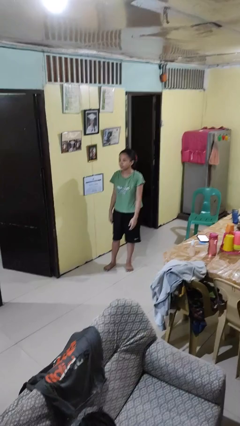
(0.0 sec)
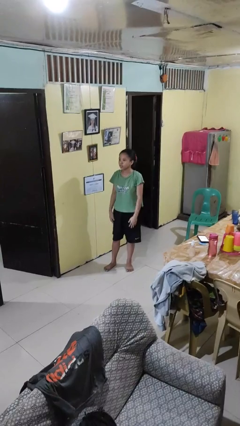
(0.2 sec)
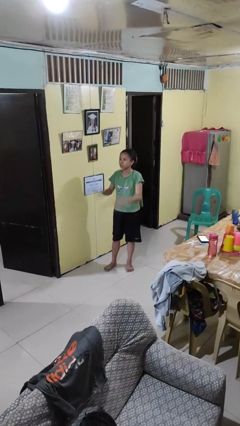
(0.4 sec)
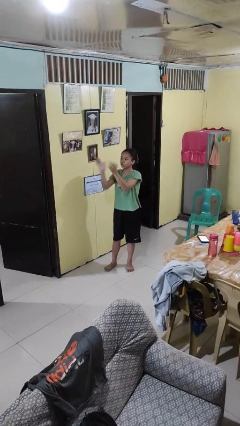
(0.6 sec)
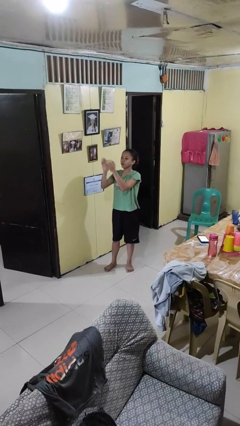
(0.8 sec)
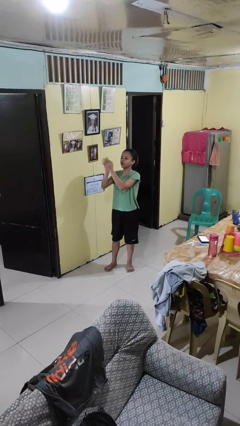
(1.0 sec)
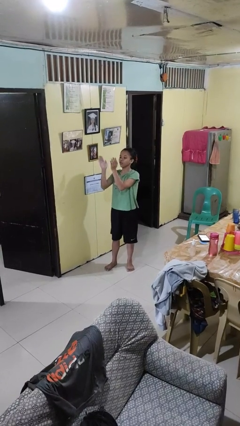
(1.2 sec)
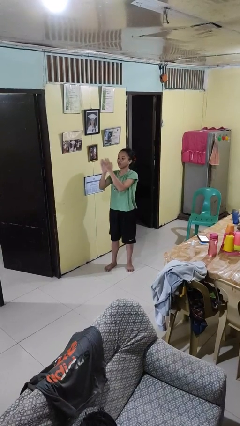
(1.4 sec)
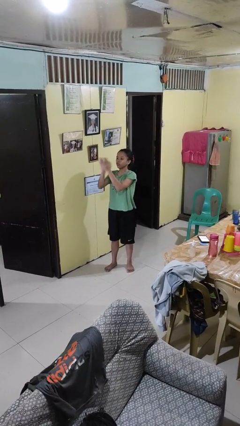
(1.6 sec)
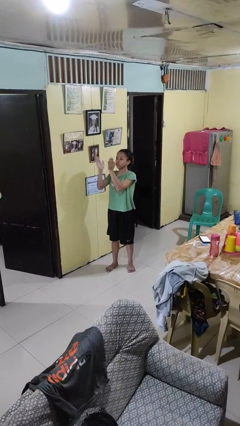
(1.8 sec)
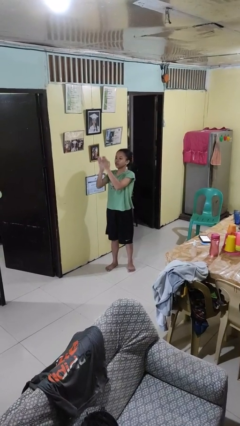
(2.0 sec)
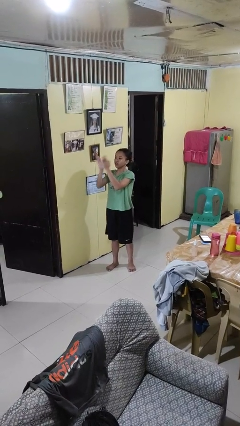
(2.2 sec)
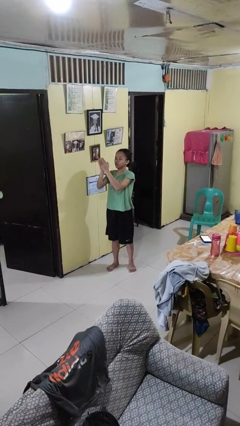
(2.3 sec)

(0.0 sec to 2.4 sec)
person claps hands

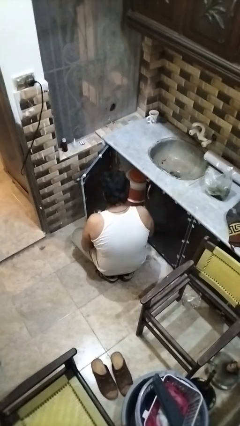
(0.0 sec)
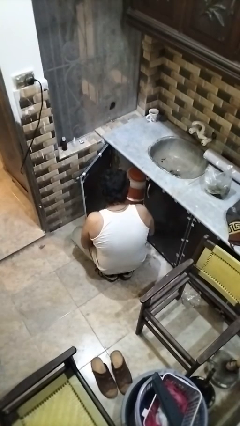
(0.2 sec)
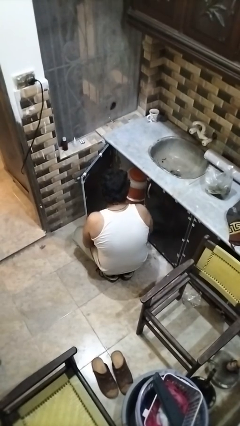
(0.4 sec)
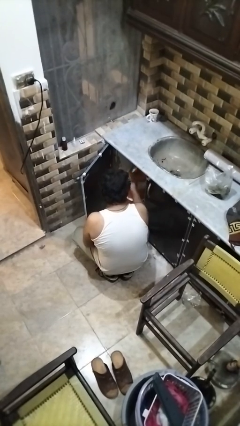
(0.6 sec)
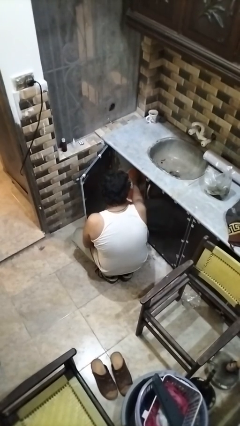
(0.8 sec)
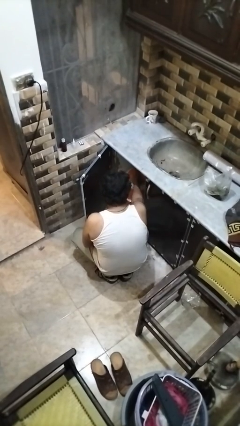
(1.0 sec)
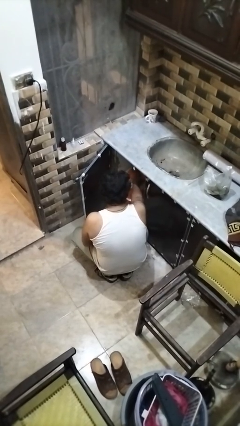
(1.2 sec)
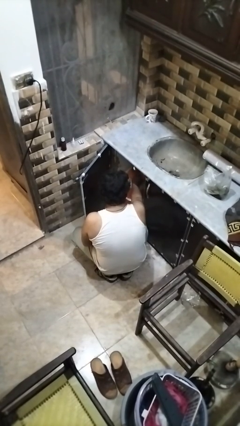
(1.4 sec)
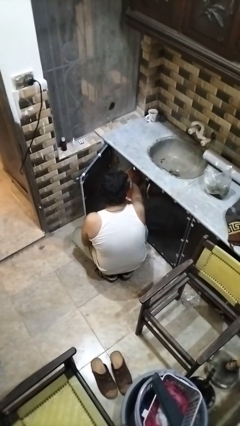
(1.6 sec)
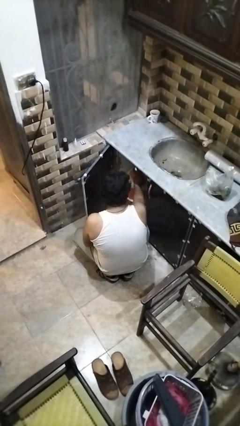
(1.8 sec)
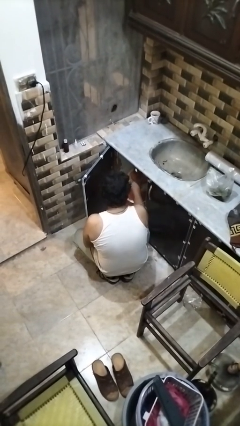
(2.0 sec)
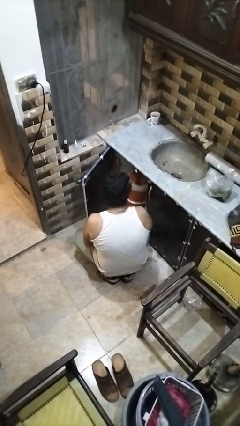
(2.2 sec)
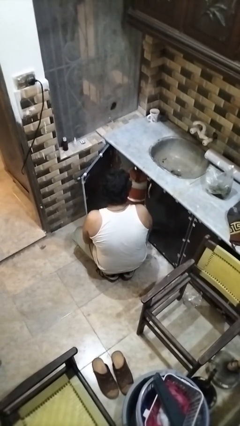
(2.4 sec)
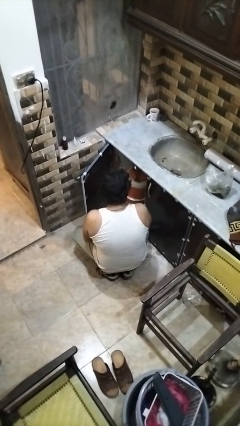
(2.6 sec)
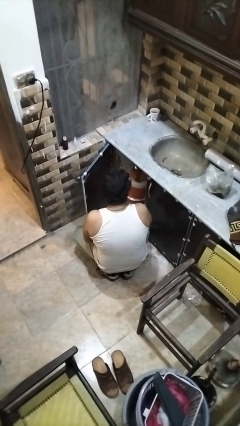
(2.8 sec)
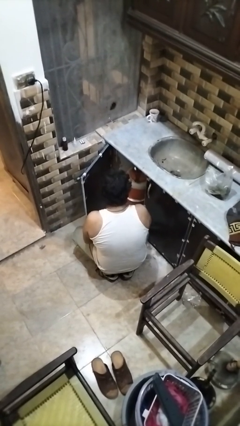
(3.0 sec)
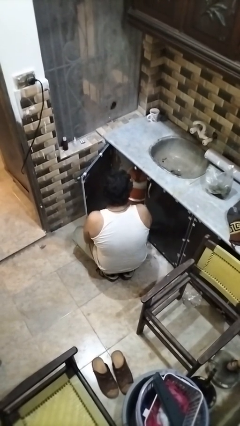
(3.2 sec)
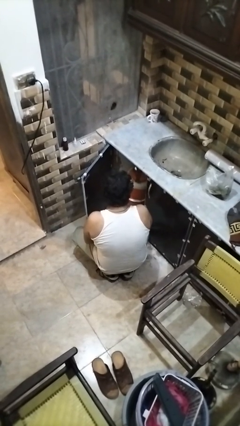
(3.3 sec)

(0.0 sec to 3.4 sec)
person puts object into kitchen drawer

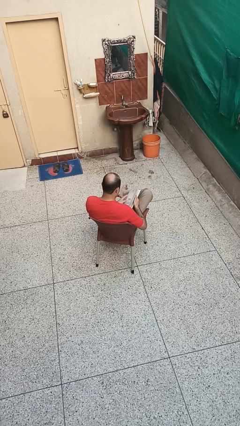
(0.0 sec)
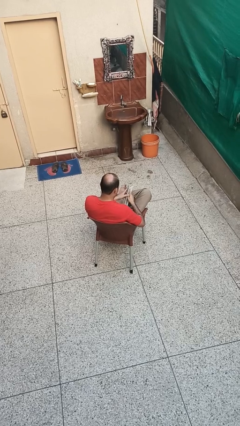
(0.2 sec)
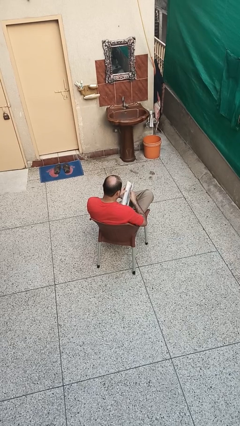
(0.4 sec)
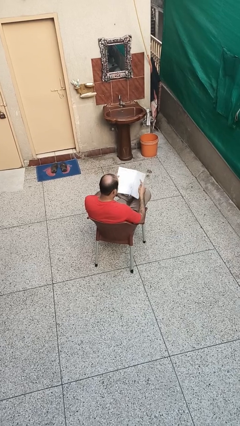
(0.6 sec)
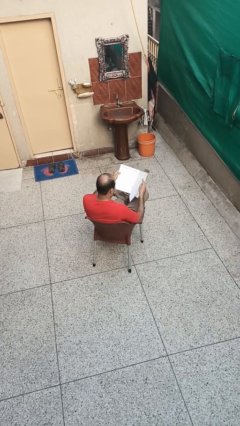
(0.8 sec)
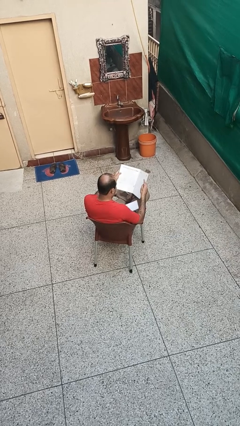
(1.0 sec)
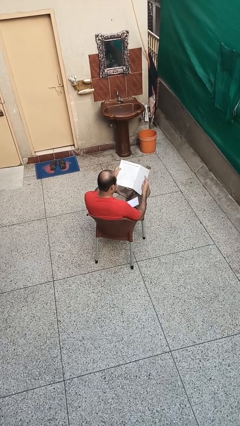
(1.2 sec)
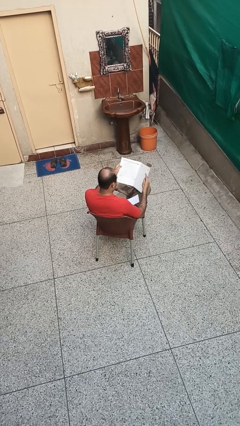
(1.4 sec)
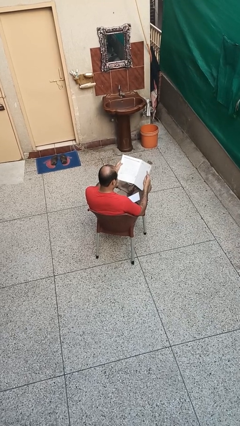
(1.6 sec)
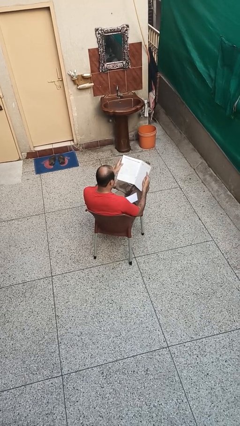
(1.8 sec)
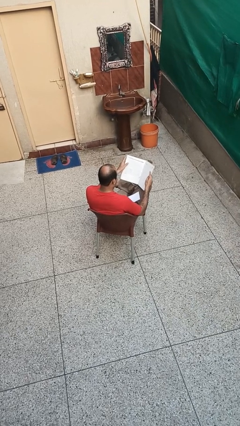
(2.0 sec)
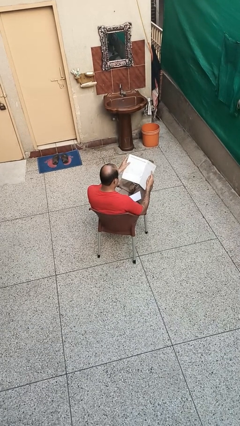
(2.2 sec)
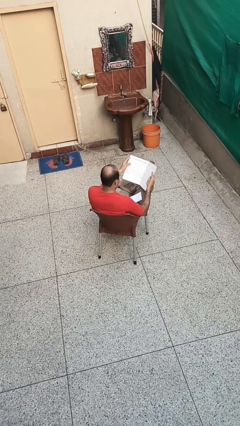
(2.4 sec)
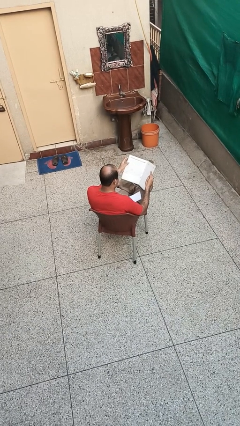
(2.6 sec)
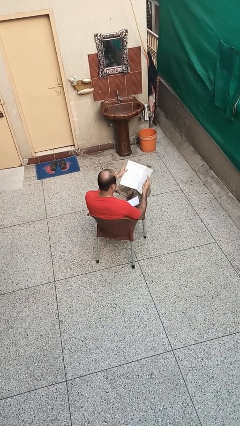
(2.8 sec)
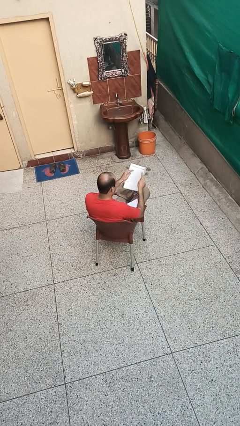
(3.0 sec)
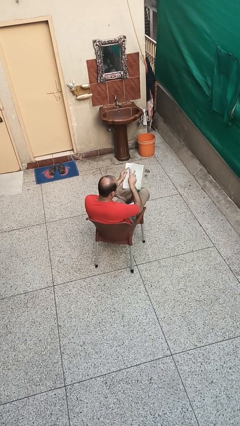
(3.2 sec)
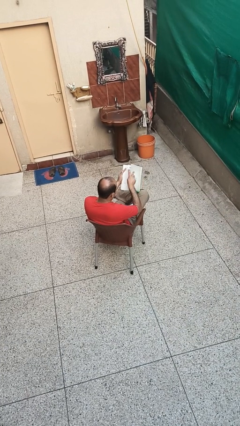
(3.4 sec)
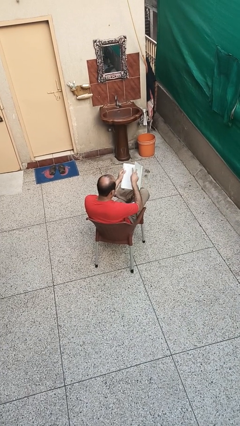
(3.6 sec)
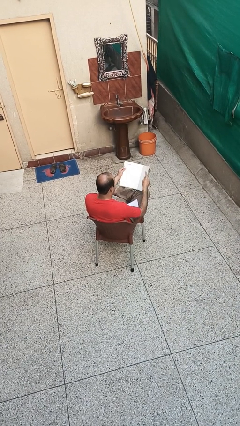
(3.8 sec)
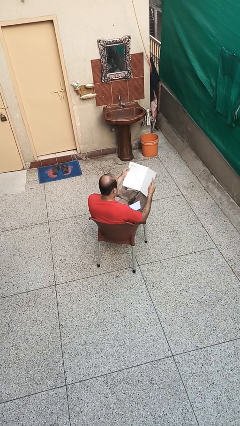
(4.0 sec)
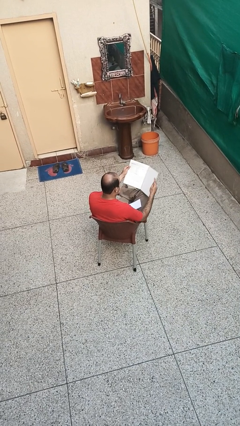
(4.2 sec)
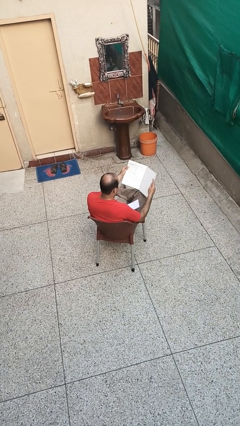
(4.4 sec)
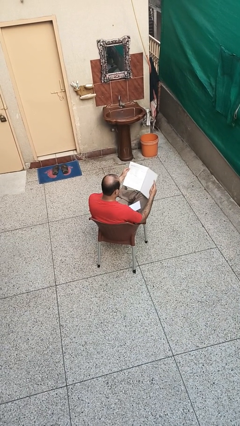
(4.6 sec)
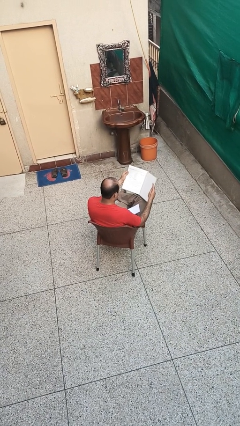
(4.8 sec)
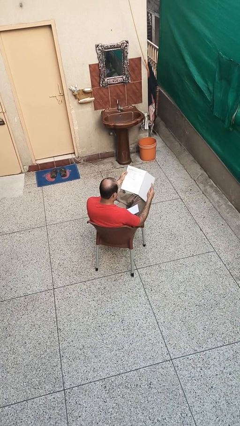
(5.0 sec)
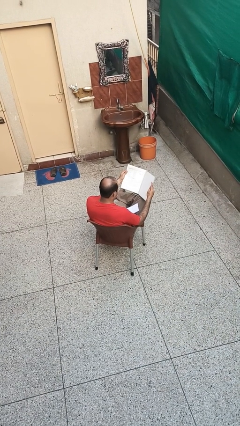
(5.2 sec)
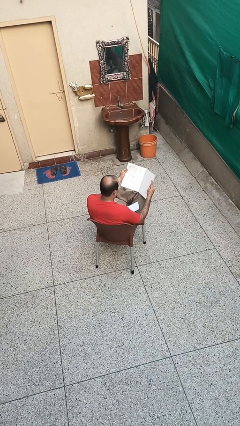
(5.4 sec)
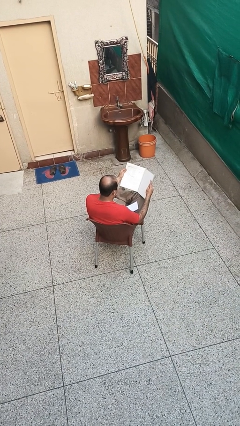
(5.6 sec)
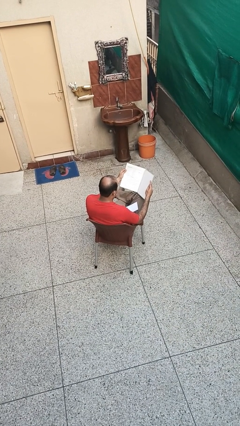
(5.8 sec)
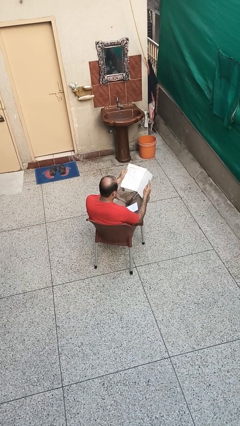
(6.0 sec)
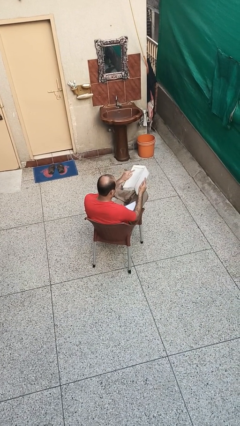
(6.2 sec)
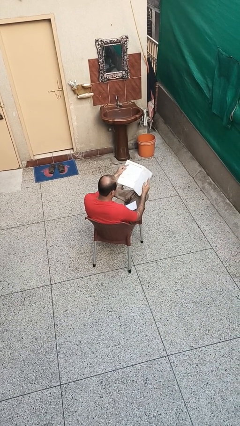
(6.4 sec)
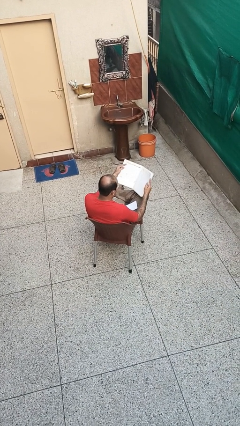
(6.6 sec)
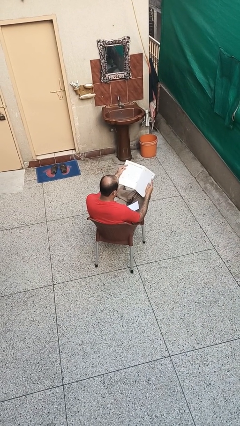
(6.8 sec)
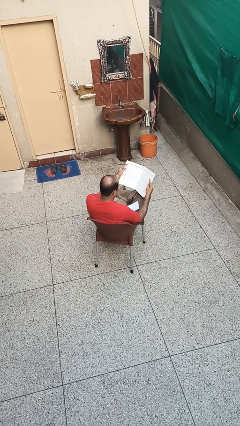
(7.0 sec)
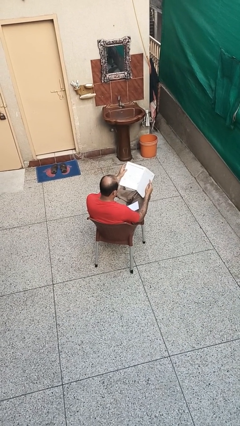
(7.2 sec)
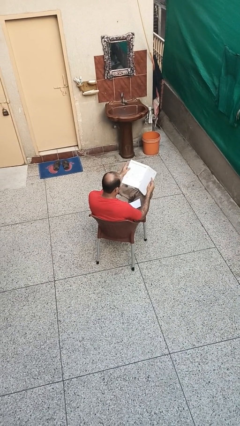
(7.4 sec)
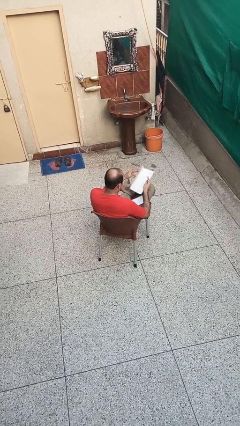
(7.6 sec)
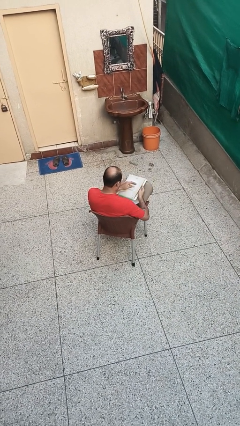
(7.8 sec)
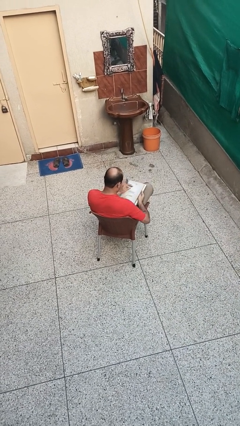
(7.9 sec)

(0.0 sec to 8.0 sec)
person reads book

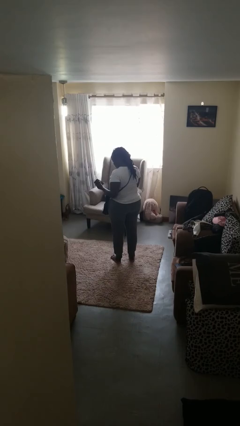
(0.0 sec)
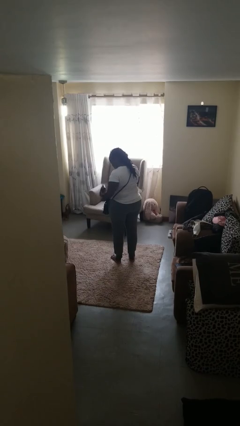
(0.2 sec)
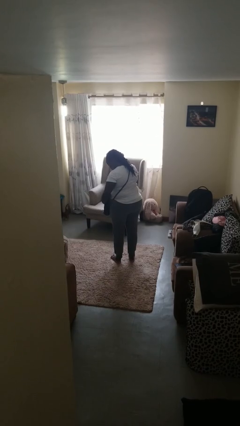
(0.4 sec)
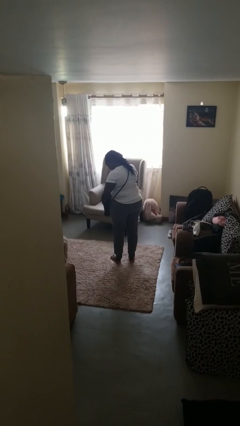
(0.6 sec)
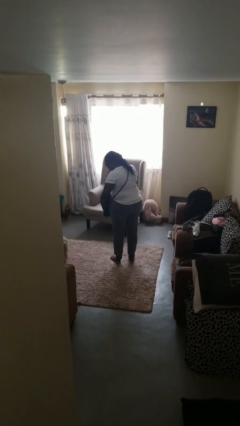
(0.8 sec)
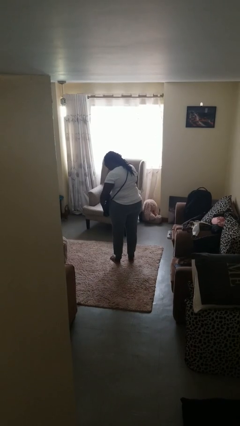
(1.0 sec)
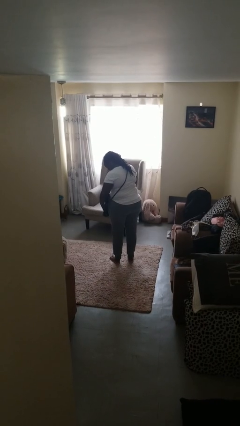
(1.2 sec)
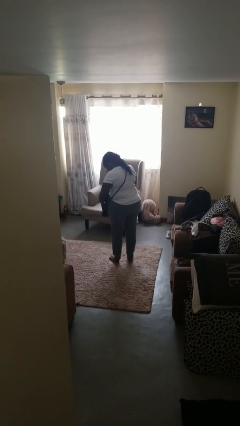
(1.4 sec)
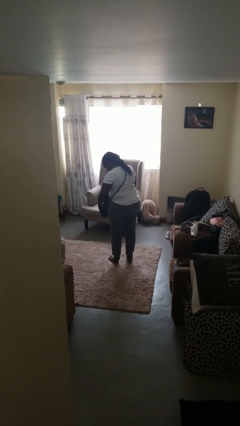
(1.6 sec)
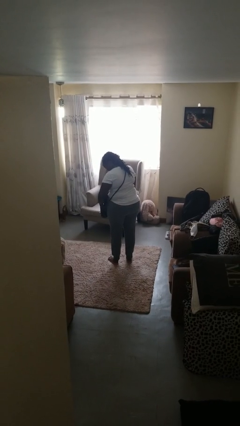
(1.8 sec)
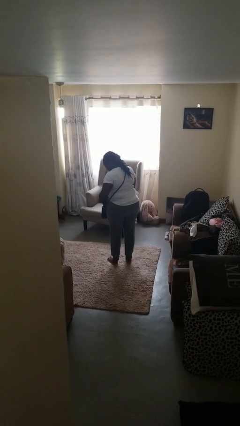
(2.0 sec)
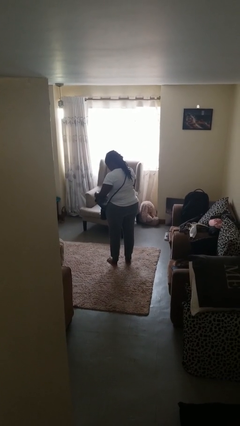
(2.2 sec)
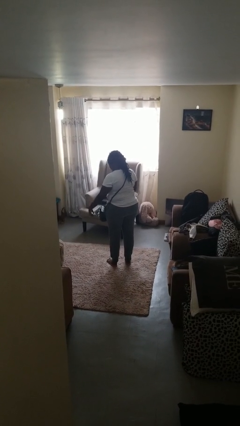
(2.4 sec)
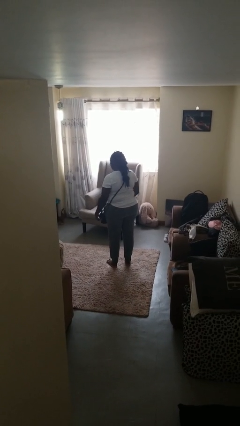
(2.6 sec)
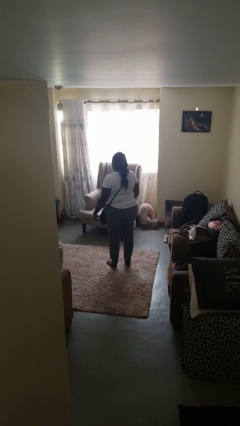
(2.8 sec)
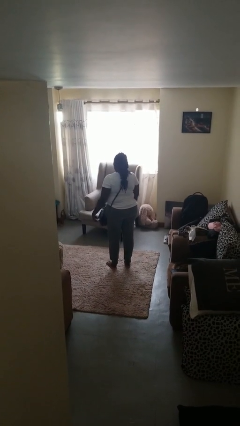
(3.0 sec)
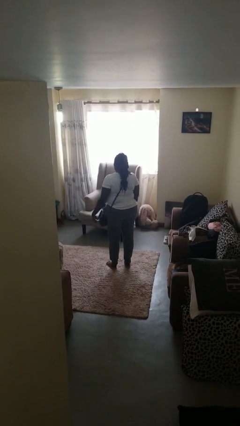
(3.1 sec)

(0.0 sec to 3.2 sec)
person puts object into purse

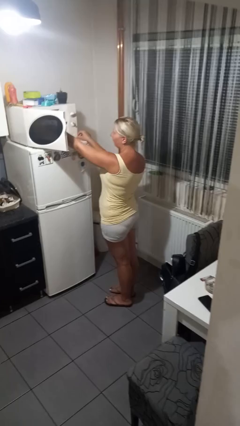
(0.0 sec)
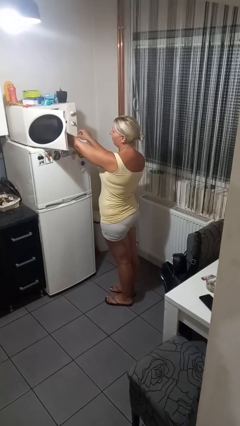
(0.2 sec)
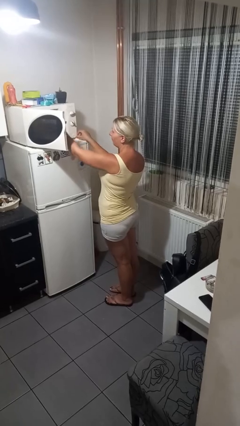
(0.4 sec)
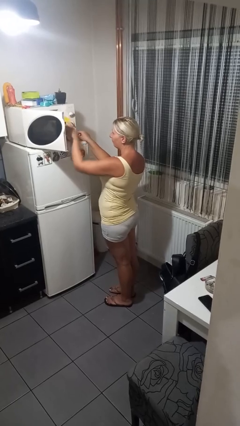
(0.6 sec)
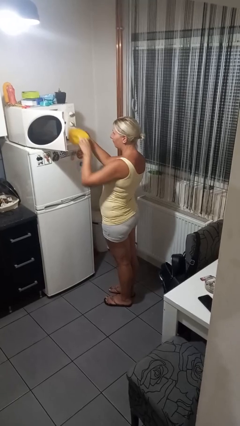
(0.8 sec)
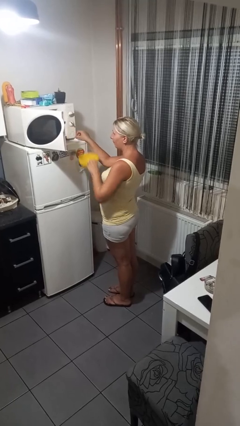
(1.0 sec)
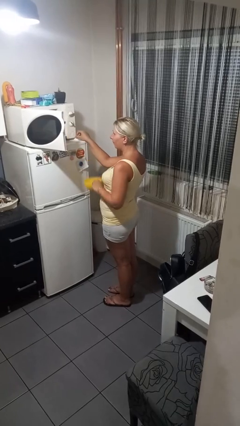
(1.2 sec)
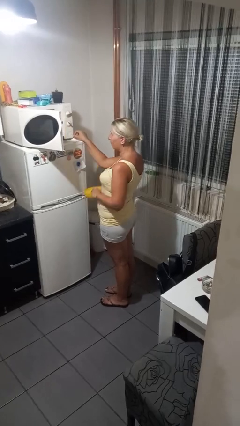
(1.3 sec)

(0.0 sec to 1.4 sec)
person takes object from microwave
